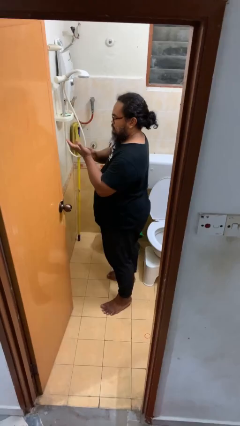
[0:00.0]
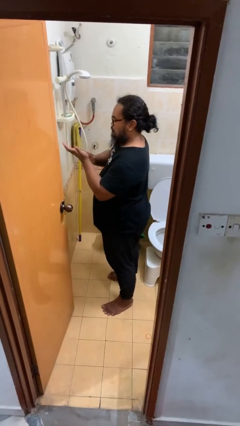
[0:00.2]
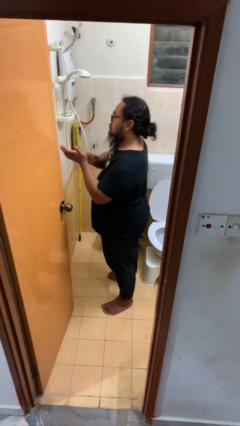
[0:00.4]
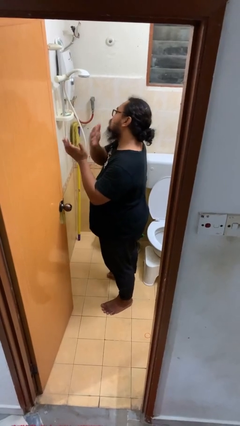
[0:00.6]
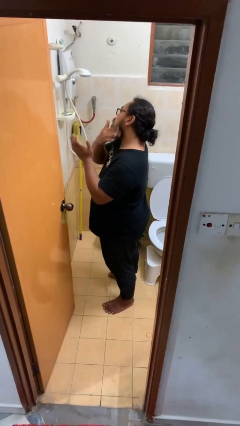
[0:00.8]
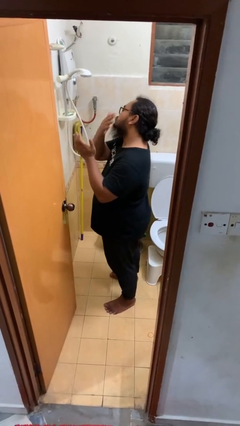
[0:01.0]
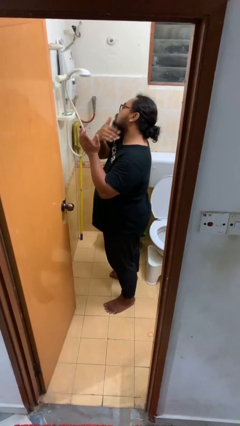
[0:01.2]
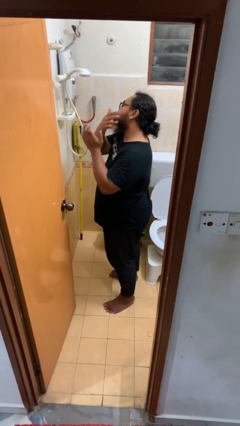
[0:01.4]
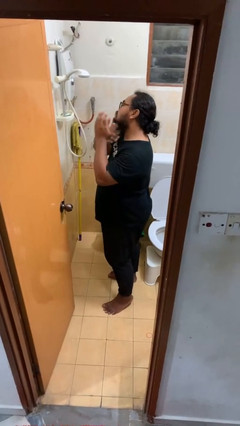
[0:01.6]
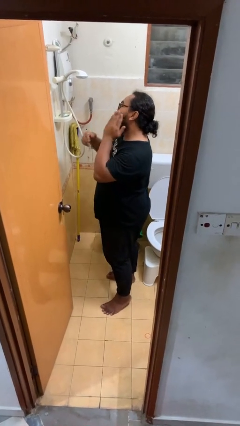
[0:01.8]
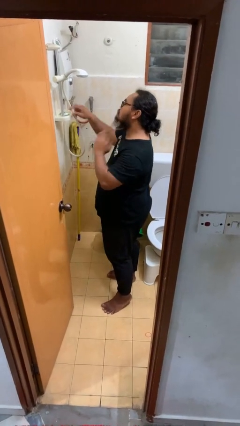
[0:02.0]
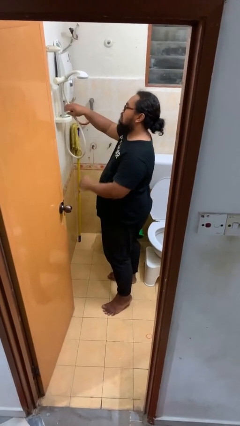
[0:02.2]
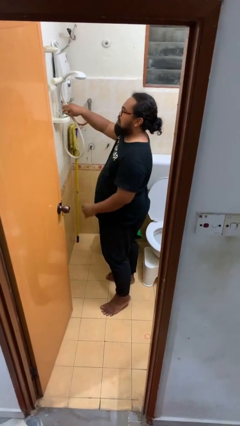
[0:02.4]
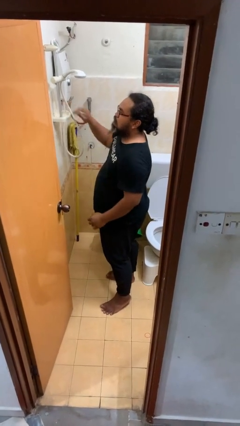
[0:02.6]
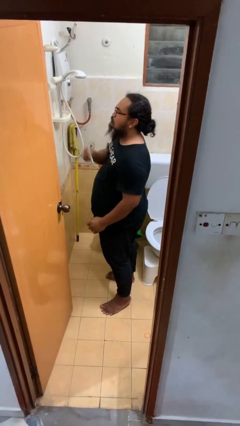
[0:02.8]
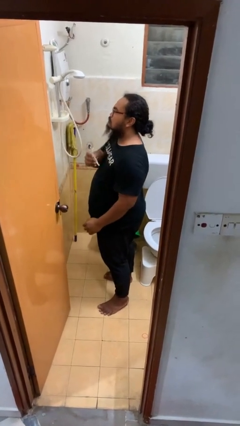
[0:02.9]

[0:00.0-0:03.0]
person applies shaving cream

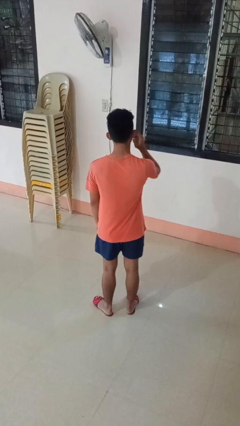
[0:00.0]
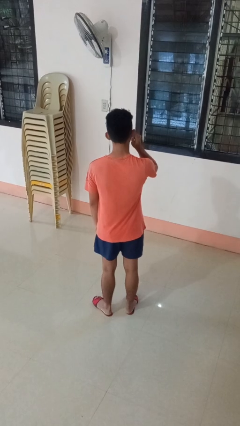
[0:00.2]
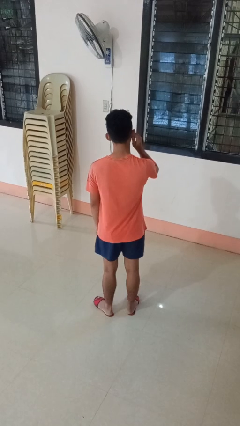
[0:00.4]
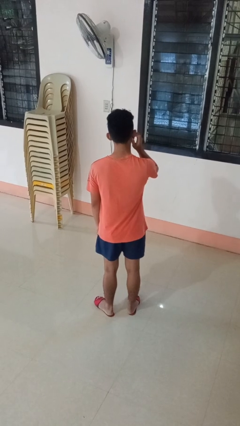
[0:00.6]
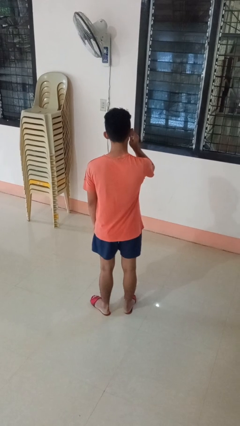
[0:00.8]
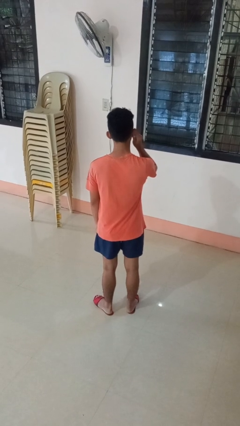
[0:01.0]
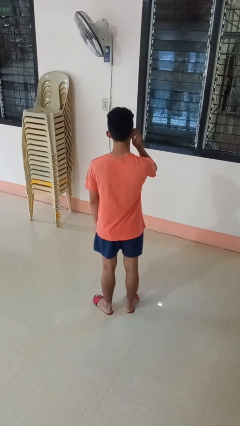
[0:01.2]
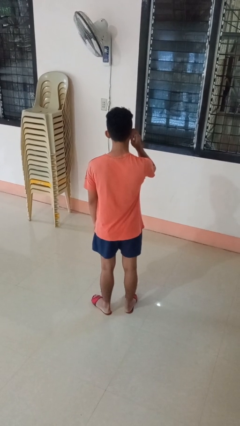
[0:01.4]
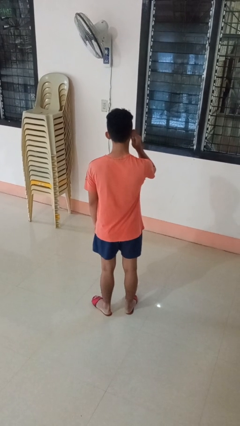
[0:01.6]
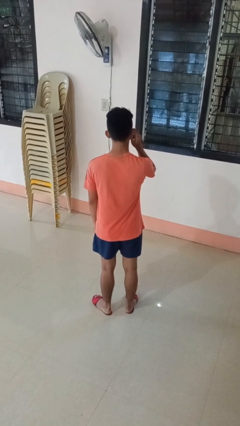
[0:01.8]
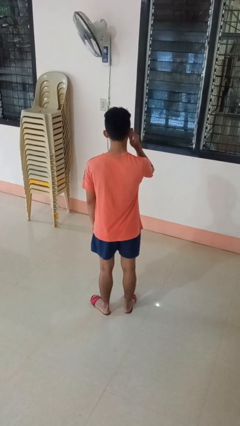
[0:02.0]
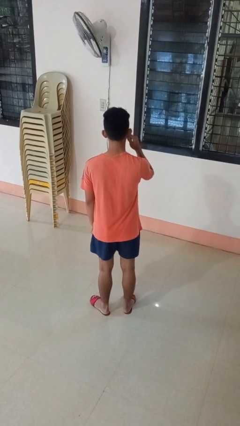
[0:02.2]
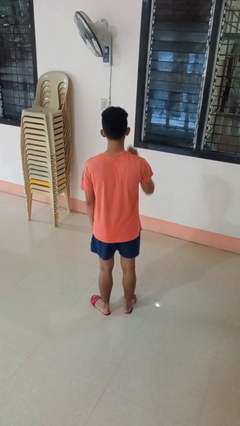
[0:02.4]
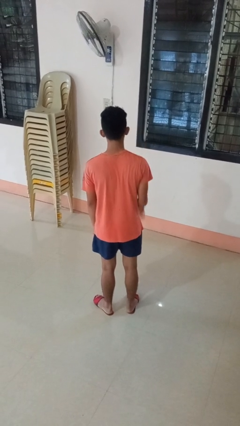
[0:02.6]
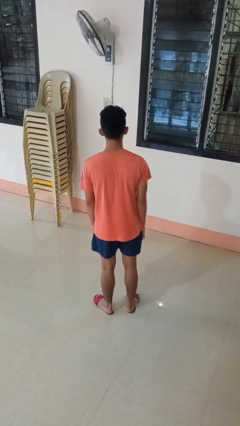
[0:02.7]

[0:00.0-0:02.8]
person touches earlobe

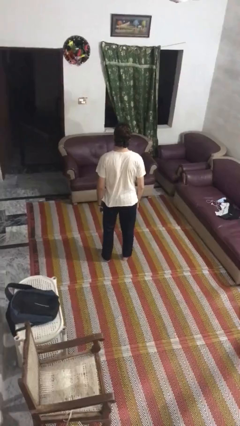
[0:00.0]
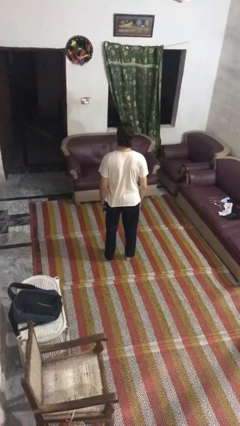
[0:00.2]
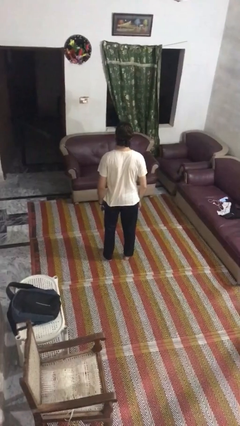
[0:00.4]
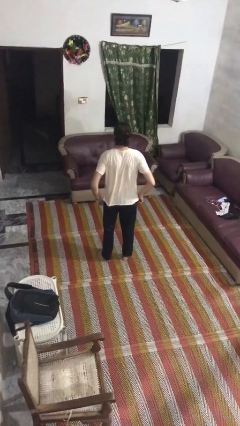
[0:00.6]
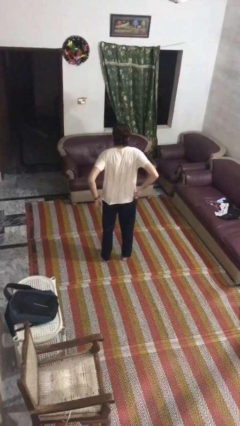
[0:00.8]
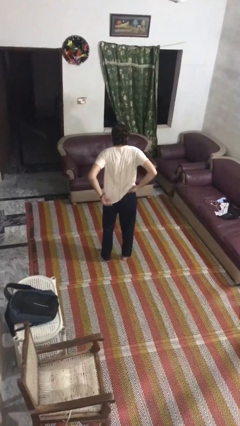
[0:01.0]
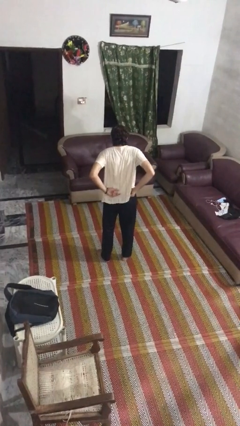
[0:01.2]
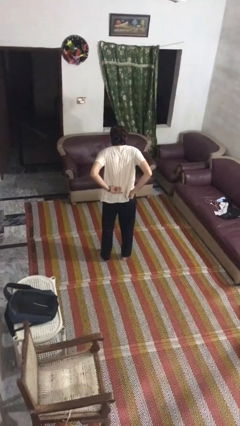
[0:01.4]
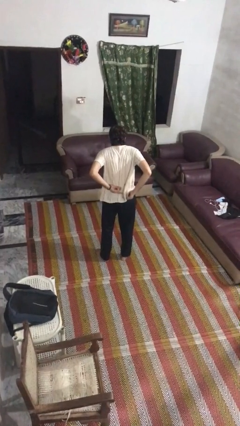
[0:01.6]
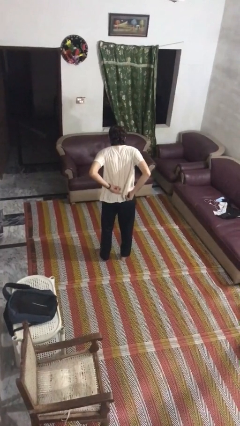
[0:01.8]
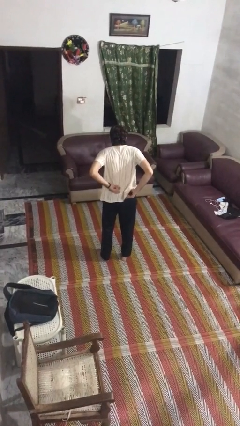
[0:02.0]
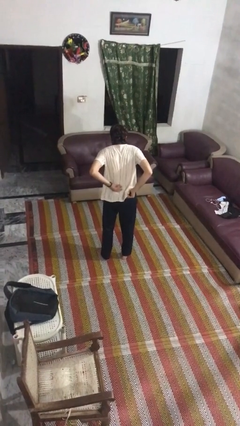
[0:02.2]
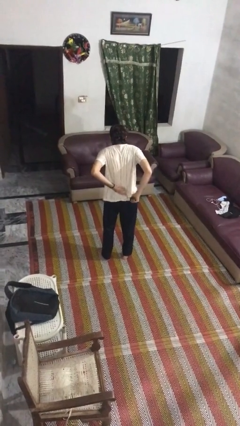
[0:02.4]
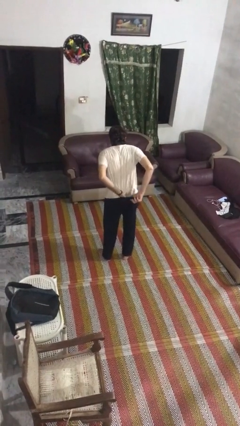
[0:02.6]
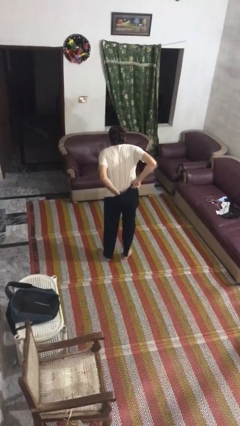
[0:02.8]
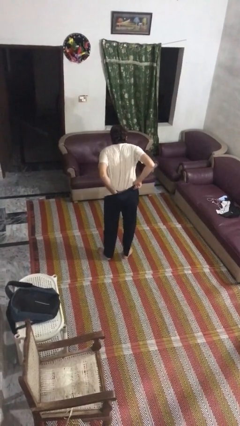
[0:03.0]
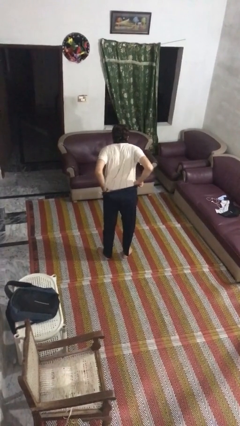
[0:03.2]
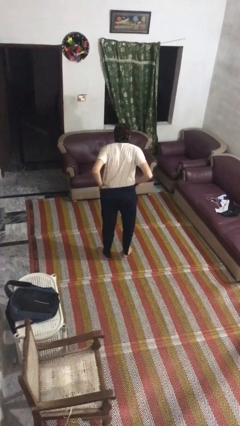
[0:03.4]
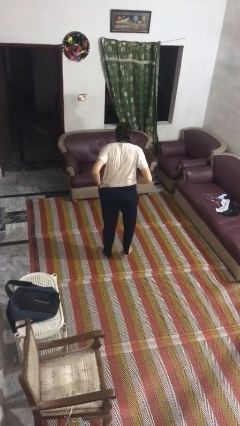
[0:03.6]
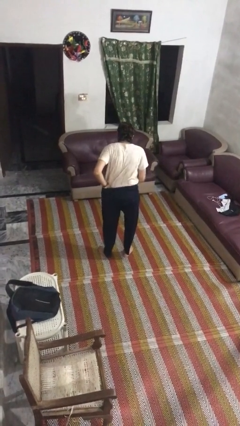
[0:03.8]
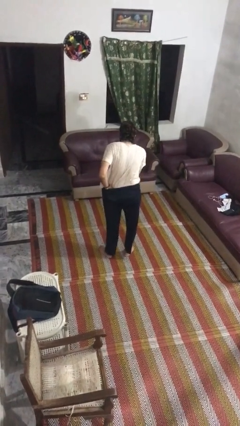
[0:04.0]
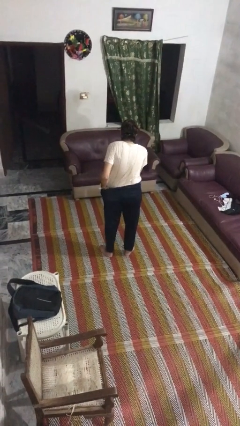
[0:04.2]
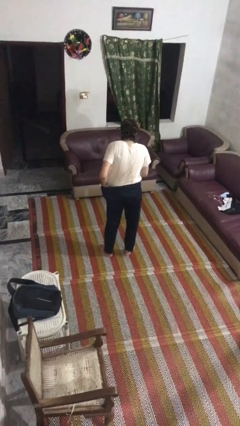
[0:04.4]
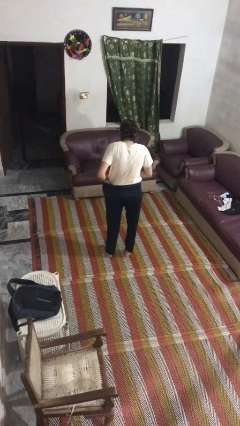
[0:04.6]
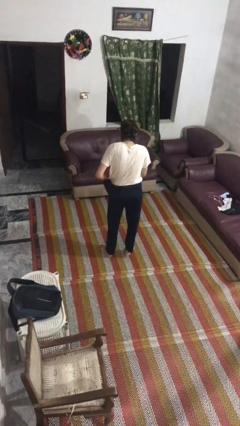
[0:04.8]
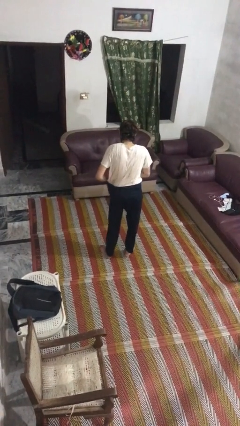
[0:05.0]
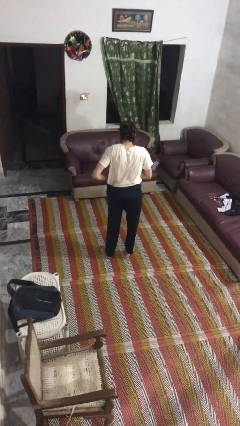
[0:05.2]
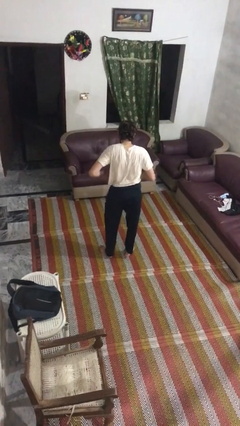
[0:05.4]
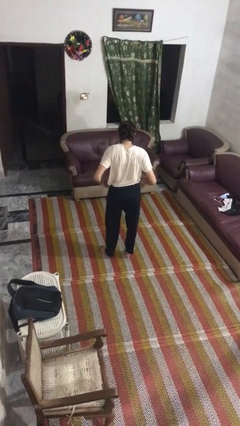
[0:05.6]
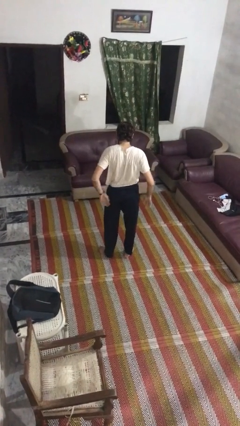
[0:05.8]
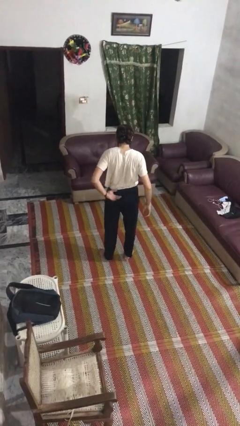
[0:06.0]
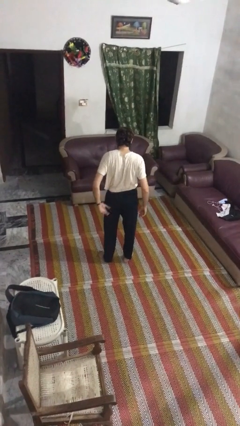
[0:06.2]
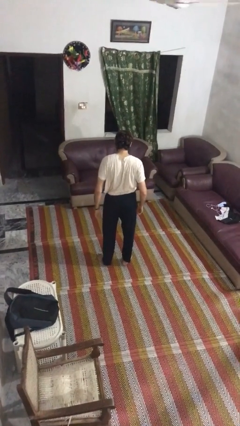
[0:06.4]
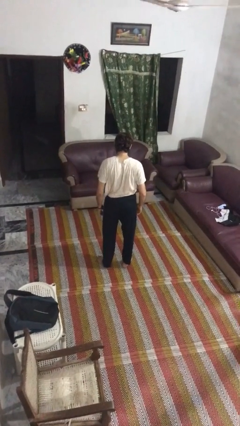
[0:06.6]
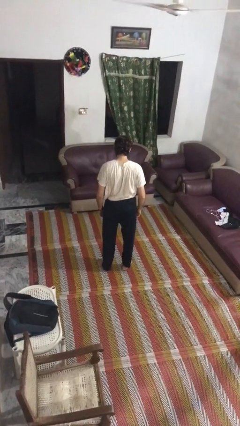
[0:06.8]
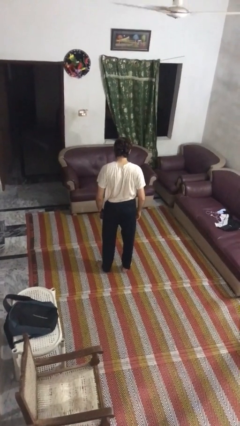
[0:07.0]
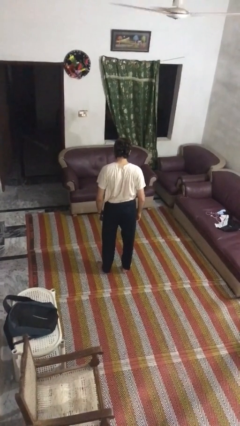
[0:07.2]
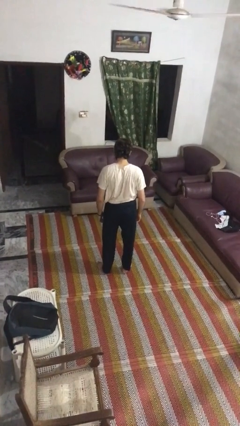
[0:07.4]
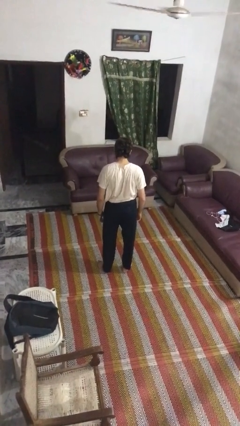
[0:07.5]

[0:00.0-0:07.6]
person tucks in shirt

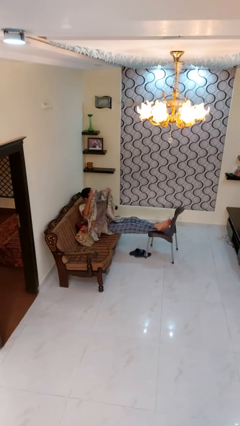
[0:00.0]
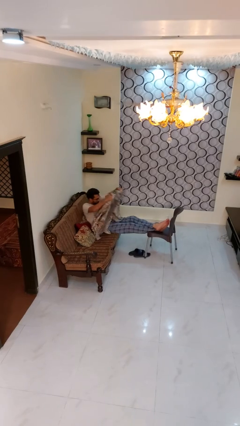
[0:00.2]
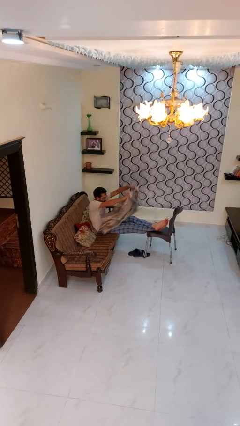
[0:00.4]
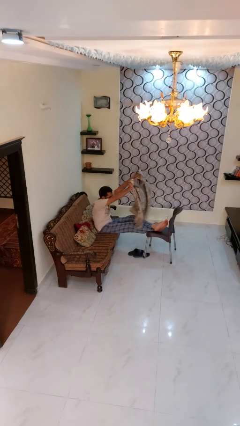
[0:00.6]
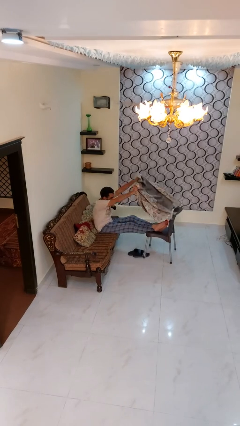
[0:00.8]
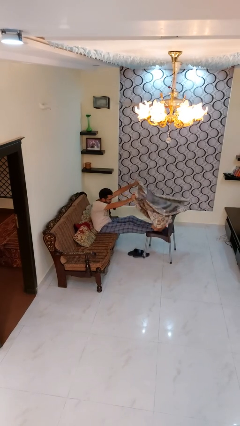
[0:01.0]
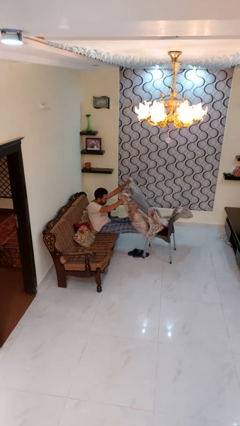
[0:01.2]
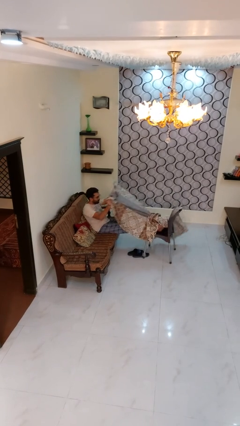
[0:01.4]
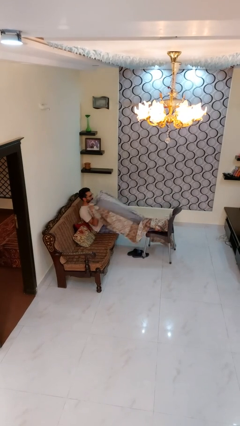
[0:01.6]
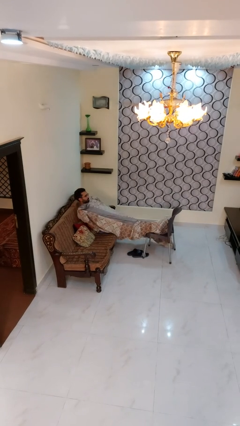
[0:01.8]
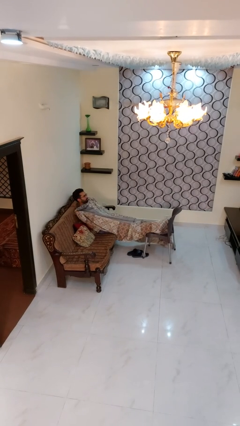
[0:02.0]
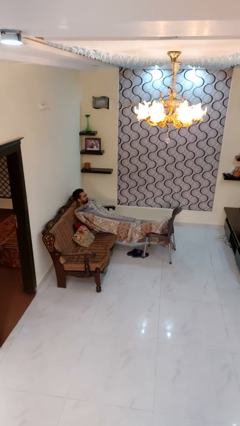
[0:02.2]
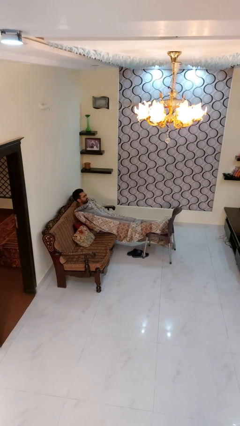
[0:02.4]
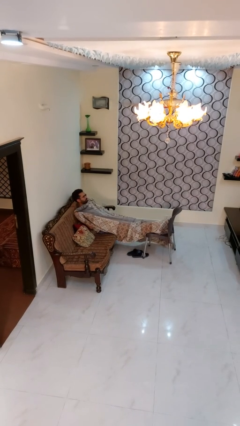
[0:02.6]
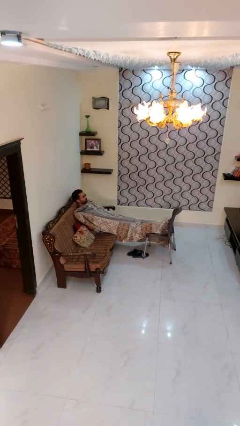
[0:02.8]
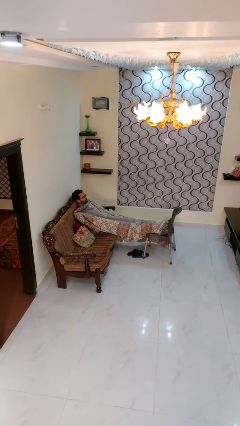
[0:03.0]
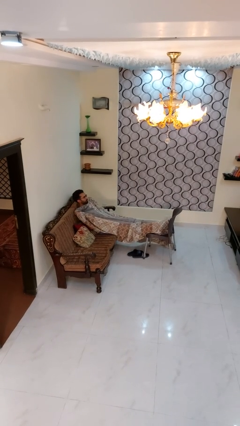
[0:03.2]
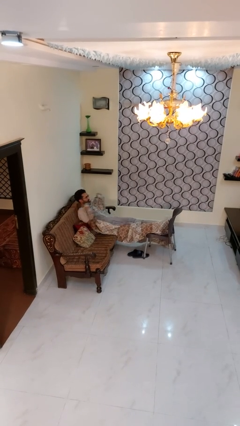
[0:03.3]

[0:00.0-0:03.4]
person covers with blanket

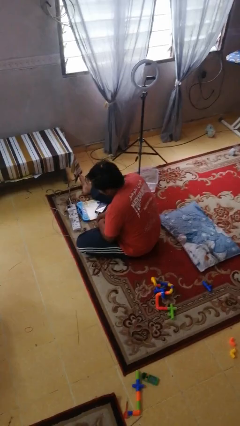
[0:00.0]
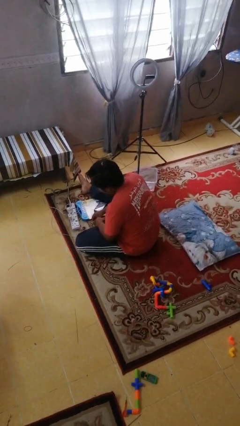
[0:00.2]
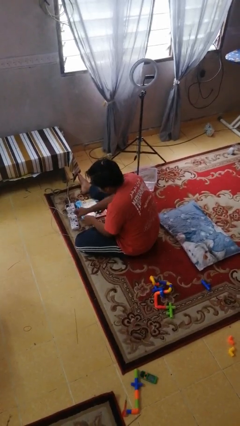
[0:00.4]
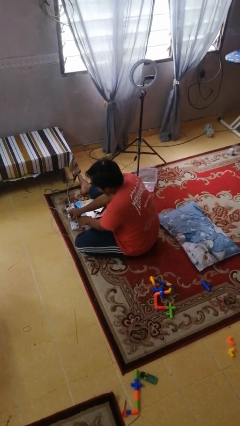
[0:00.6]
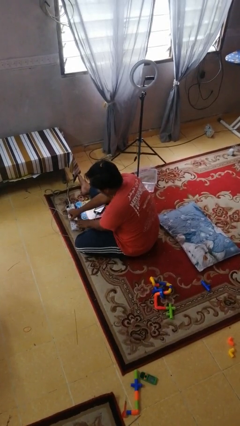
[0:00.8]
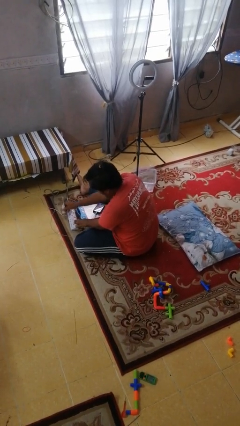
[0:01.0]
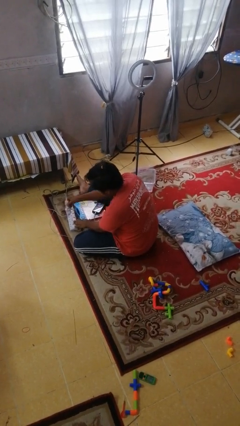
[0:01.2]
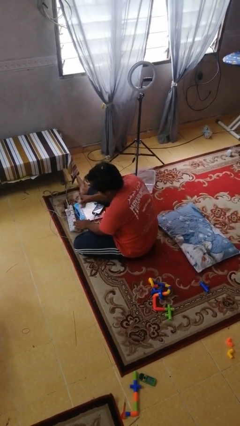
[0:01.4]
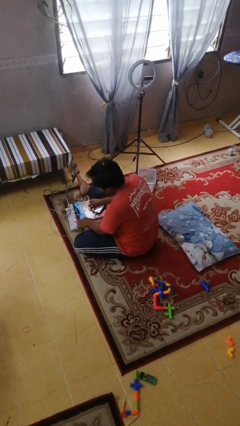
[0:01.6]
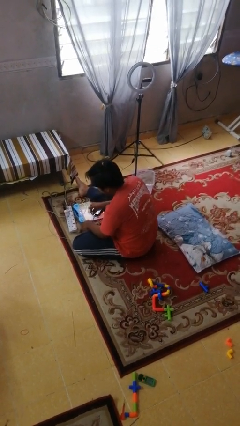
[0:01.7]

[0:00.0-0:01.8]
person unplugs from electrical socket
